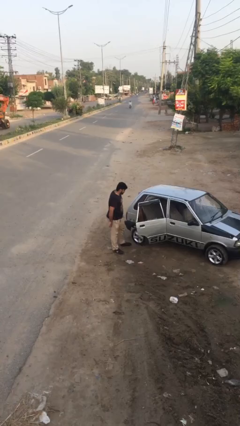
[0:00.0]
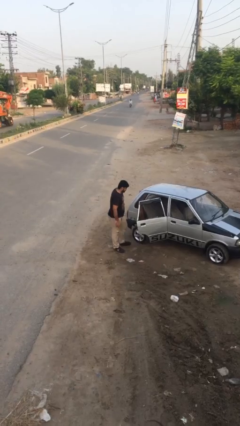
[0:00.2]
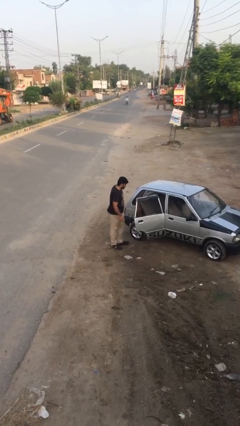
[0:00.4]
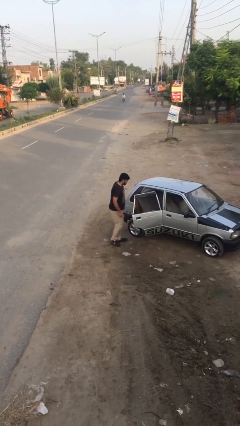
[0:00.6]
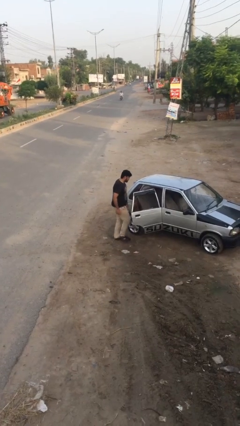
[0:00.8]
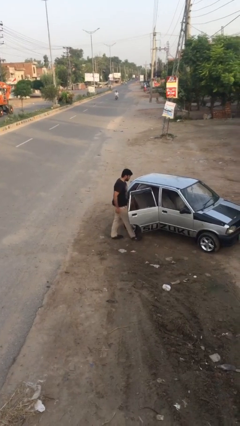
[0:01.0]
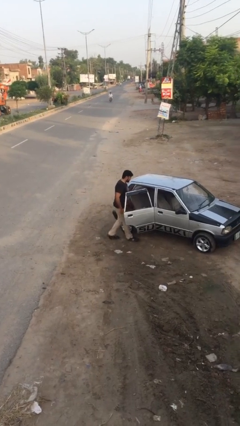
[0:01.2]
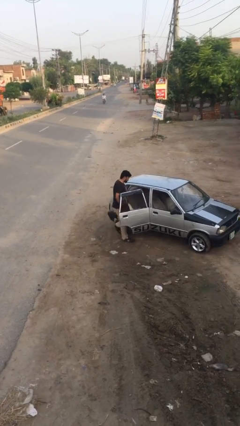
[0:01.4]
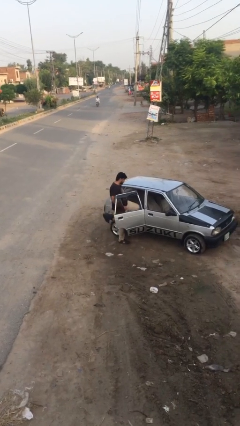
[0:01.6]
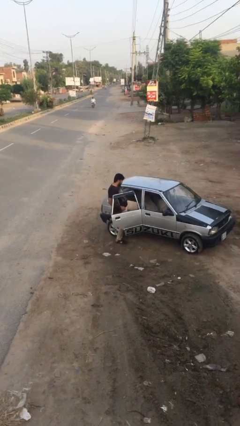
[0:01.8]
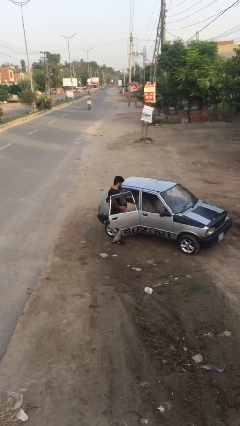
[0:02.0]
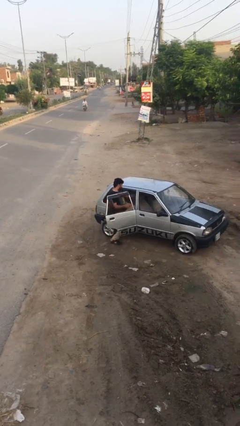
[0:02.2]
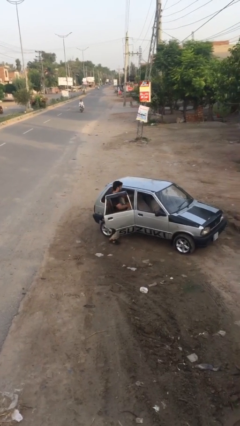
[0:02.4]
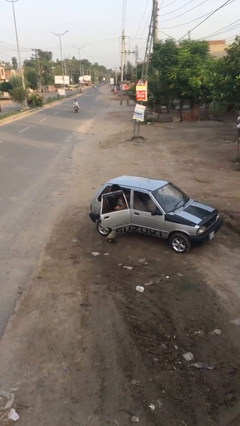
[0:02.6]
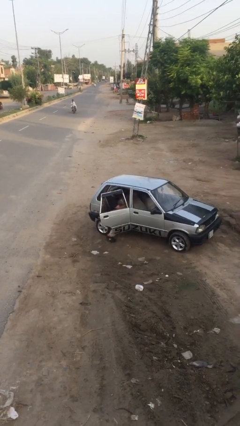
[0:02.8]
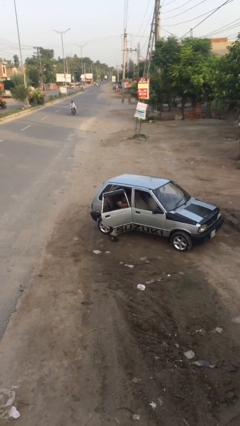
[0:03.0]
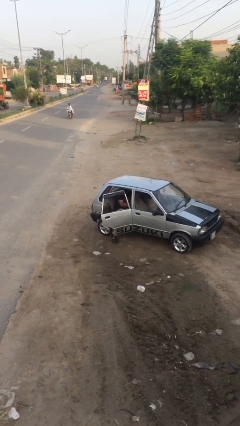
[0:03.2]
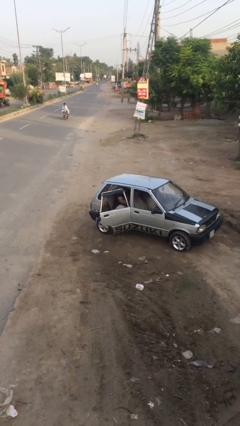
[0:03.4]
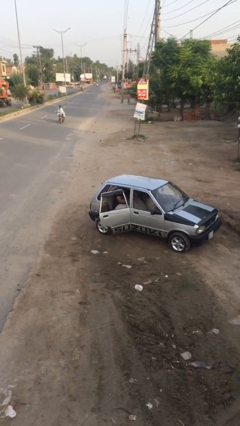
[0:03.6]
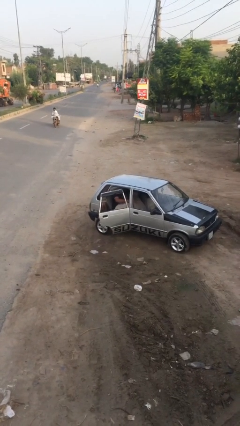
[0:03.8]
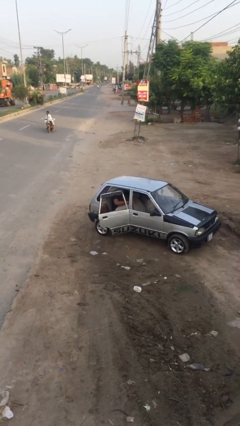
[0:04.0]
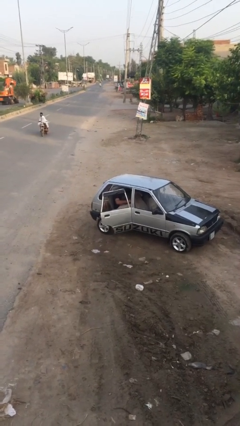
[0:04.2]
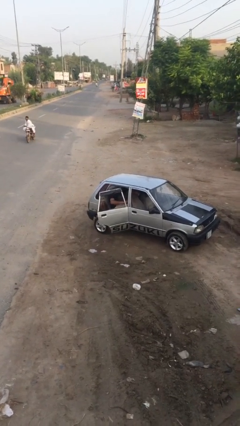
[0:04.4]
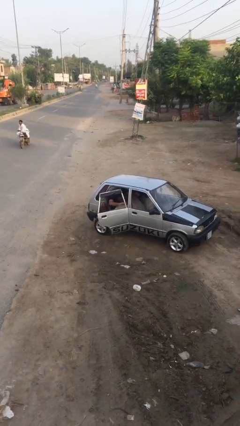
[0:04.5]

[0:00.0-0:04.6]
person enters car

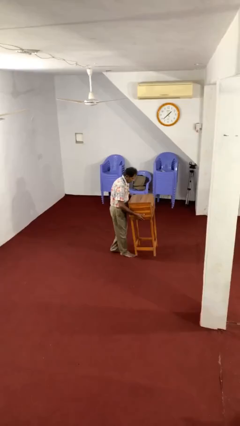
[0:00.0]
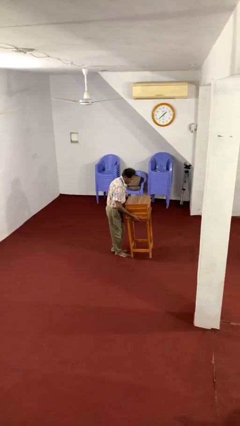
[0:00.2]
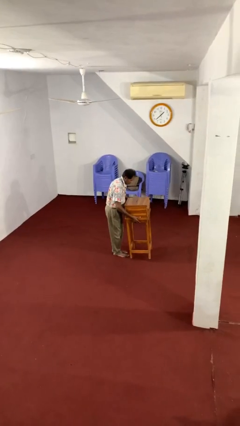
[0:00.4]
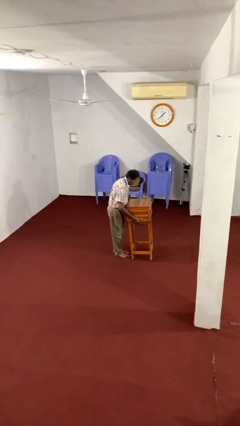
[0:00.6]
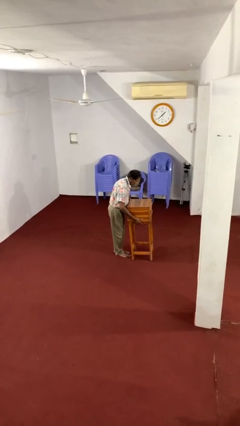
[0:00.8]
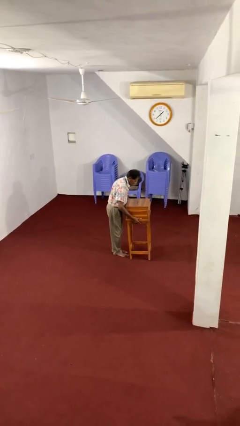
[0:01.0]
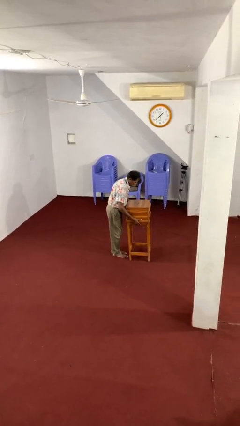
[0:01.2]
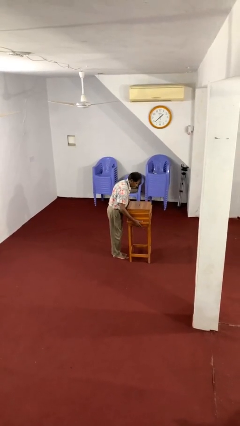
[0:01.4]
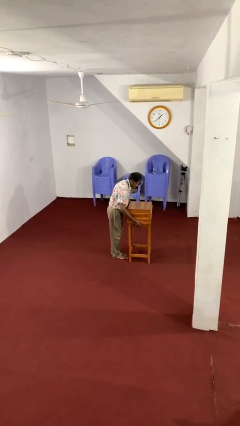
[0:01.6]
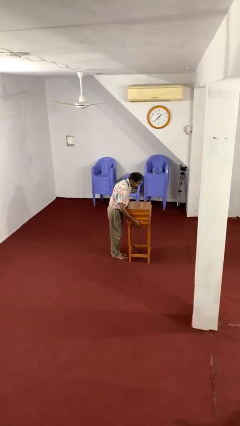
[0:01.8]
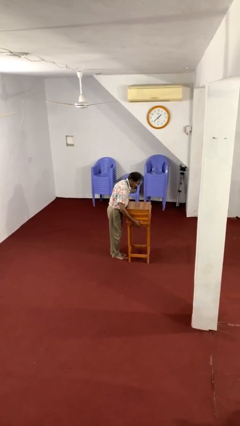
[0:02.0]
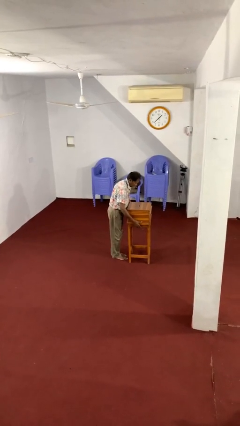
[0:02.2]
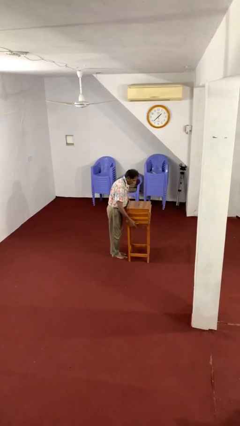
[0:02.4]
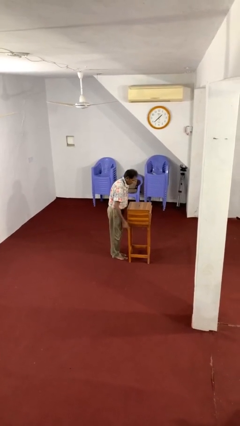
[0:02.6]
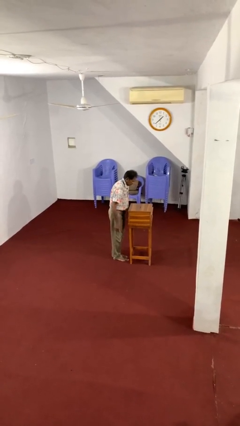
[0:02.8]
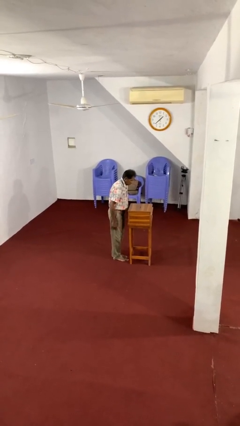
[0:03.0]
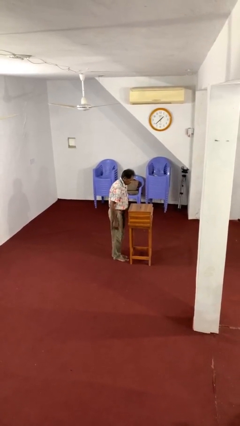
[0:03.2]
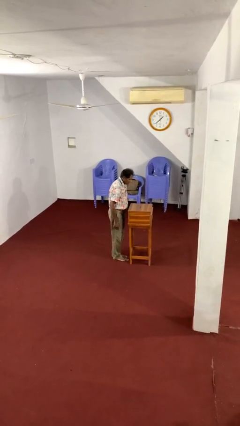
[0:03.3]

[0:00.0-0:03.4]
person puts down object on floor

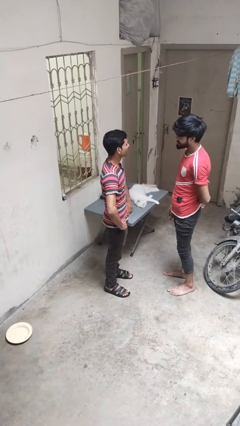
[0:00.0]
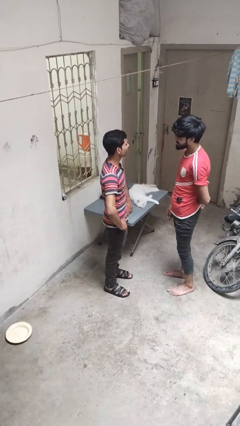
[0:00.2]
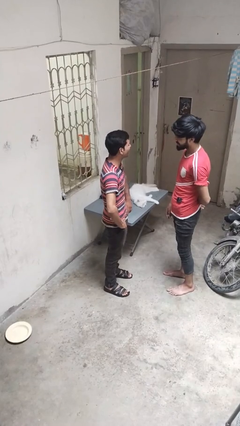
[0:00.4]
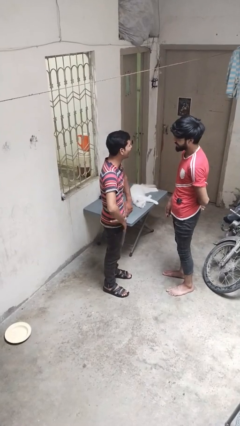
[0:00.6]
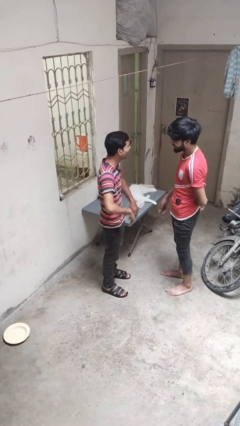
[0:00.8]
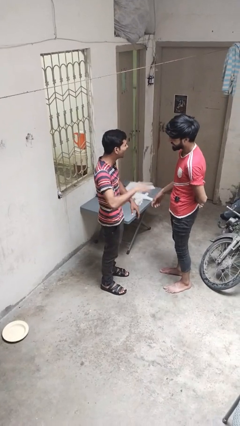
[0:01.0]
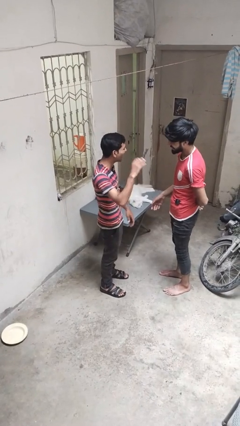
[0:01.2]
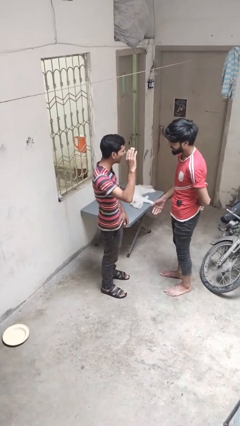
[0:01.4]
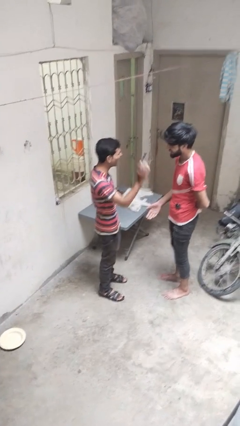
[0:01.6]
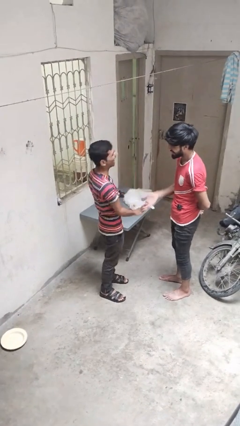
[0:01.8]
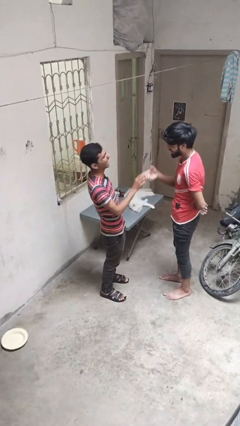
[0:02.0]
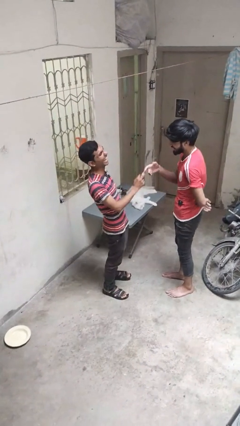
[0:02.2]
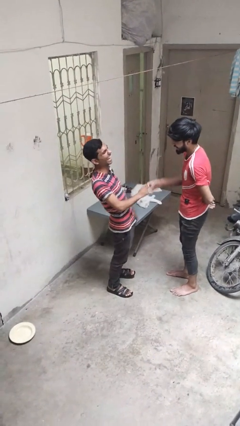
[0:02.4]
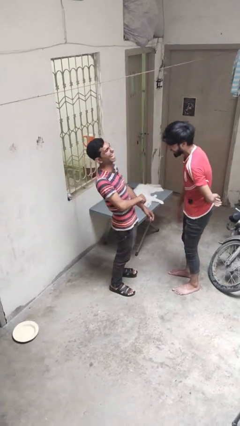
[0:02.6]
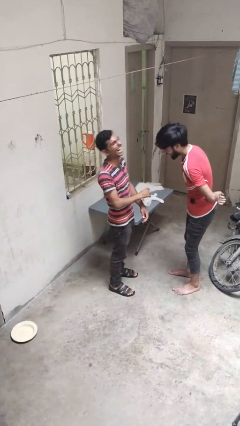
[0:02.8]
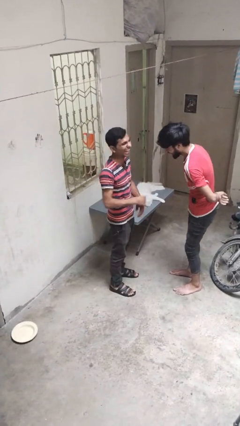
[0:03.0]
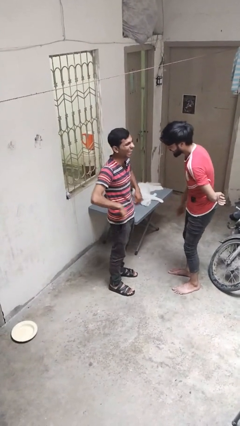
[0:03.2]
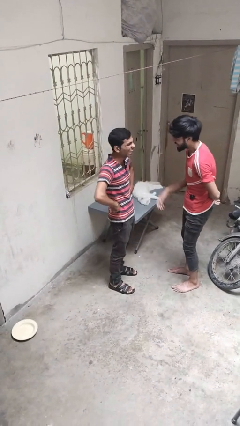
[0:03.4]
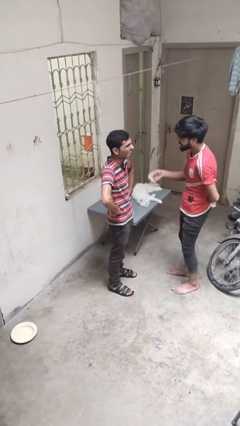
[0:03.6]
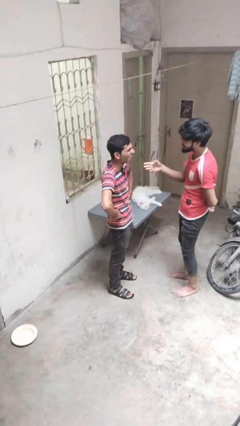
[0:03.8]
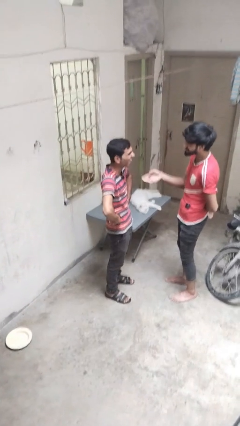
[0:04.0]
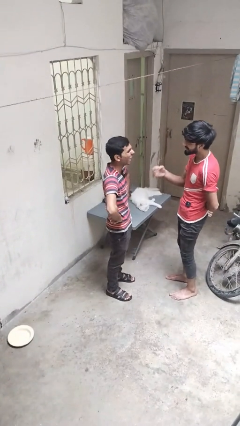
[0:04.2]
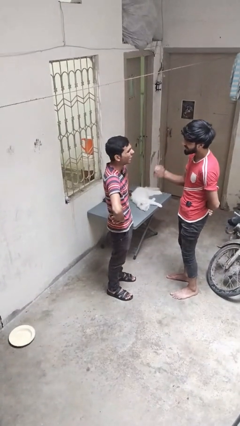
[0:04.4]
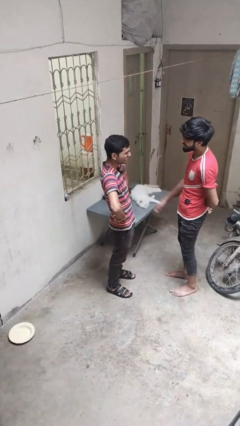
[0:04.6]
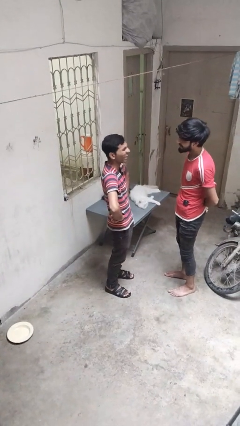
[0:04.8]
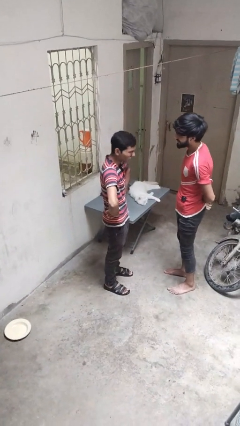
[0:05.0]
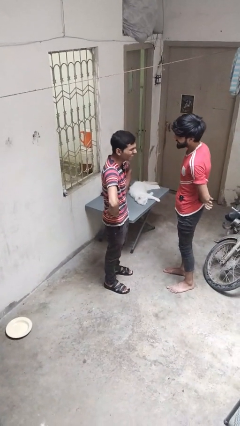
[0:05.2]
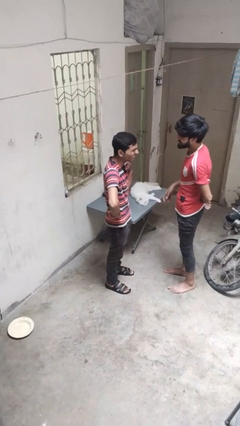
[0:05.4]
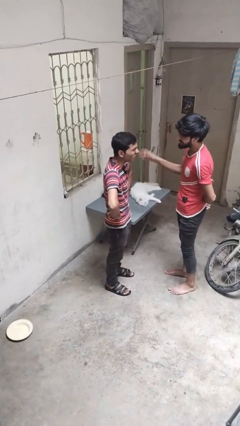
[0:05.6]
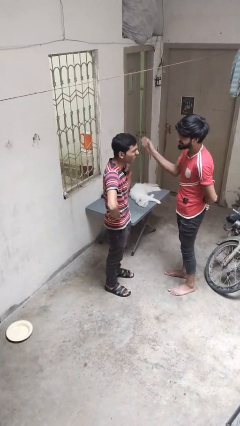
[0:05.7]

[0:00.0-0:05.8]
person laughs with person

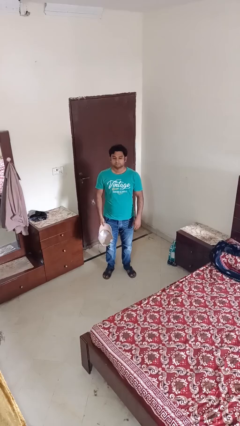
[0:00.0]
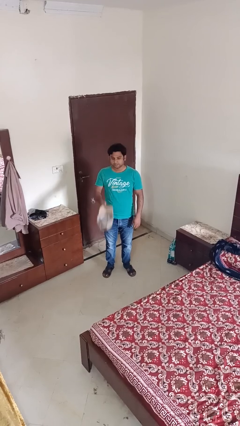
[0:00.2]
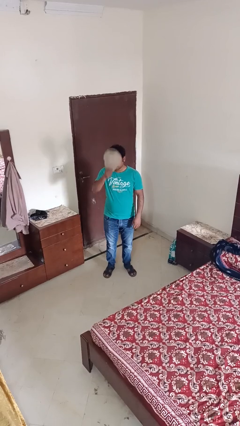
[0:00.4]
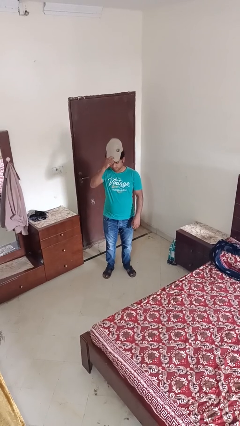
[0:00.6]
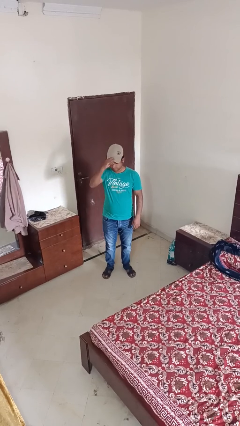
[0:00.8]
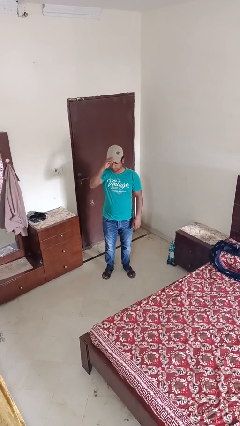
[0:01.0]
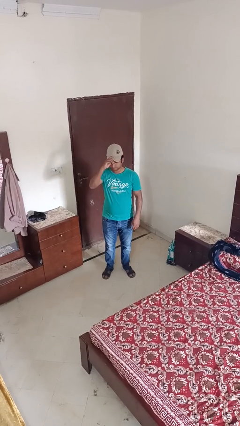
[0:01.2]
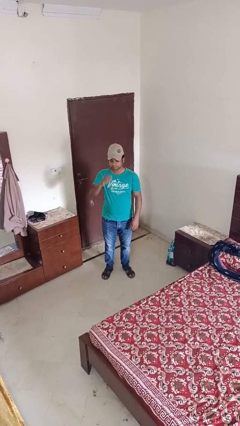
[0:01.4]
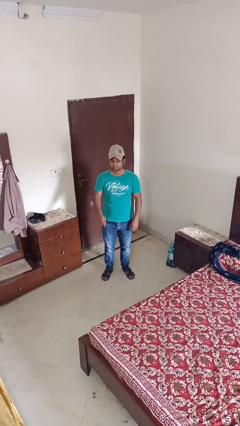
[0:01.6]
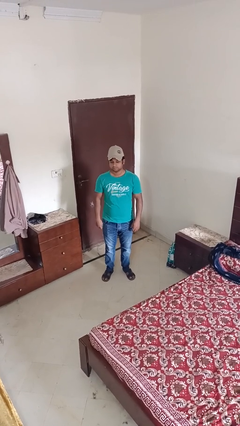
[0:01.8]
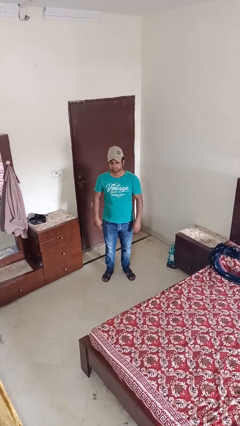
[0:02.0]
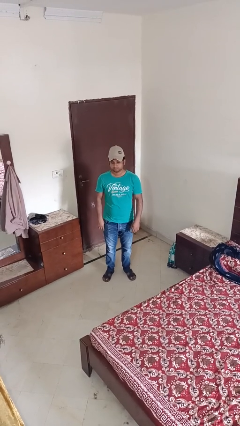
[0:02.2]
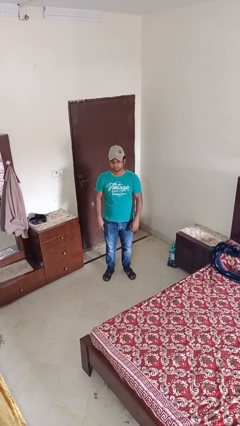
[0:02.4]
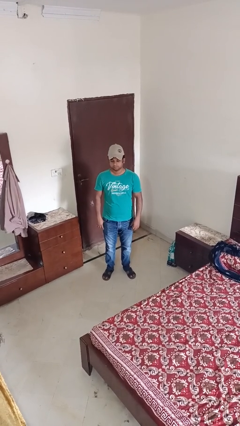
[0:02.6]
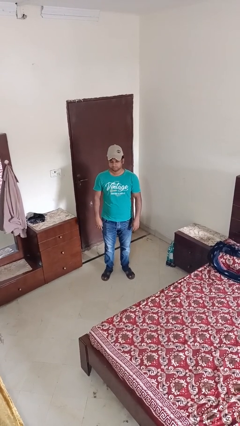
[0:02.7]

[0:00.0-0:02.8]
person puts on hat

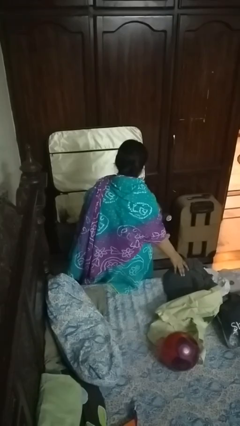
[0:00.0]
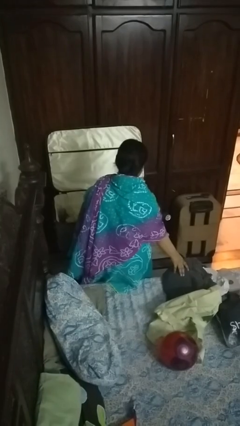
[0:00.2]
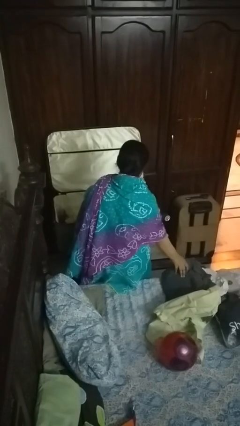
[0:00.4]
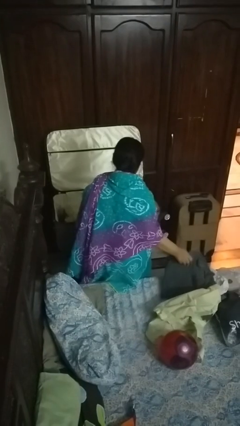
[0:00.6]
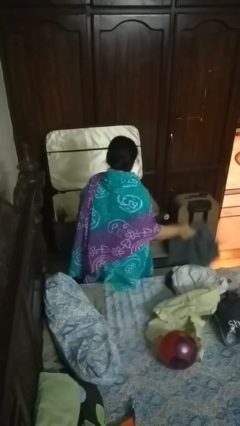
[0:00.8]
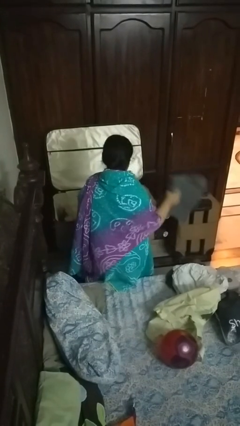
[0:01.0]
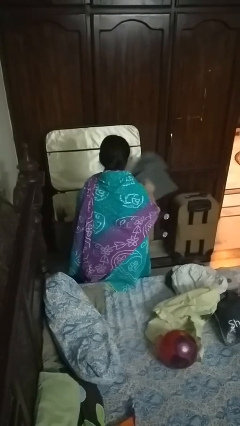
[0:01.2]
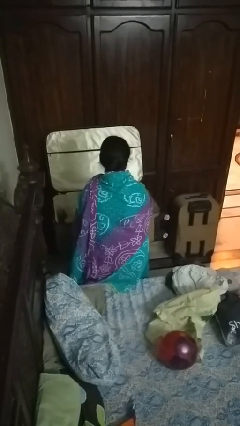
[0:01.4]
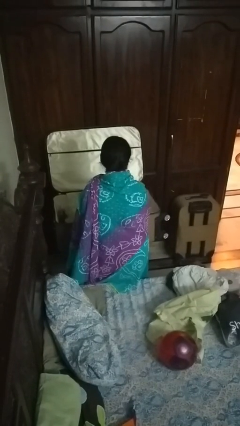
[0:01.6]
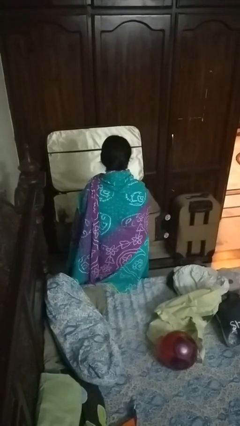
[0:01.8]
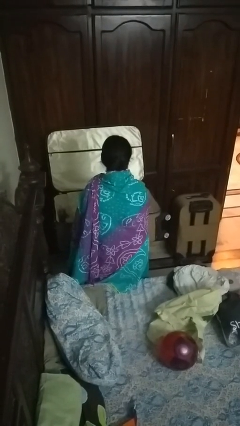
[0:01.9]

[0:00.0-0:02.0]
person loads clothes into suitcase
